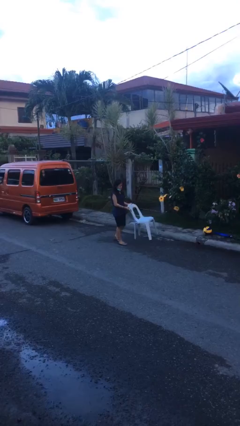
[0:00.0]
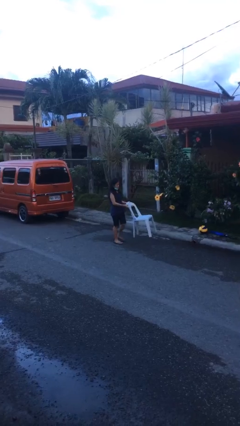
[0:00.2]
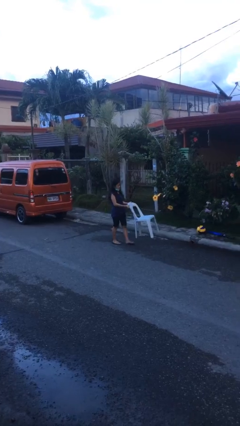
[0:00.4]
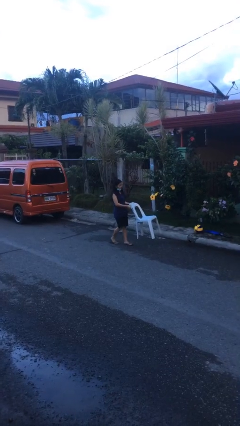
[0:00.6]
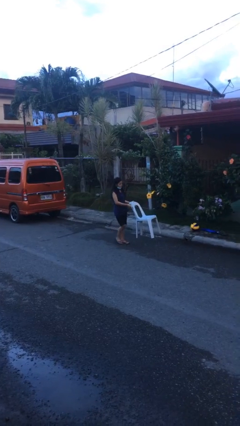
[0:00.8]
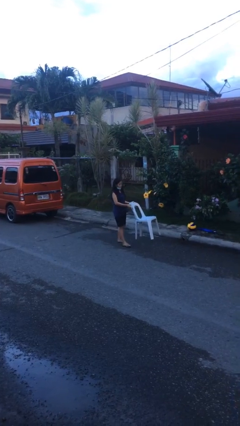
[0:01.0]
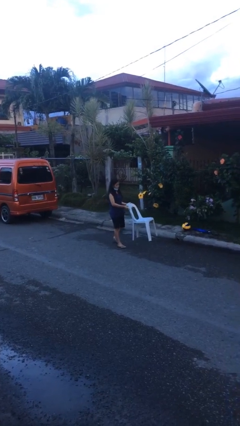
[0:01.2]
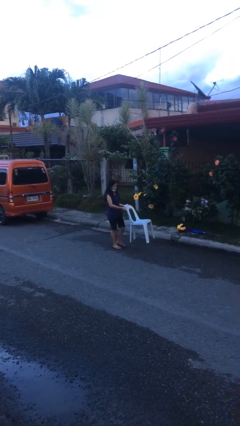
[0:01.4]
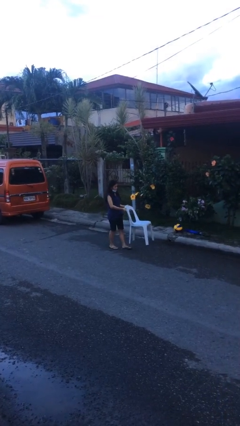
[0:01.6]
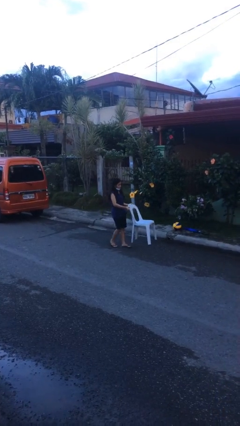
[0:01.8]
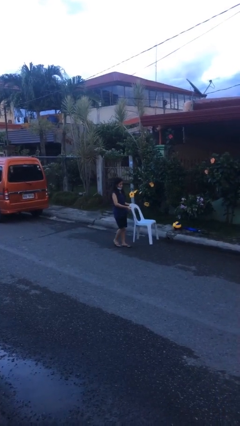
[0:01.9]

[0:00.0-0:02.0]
person carries heavy object

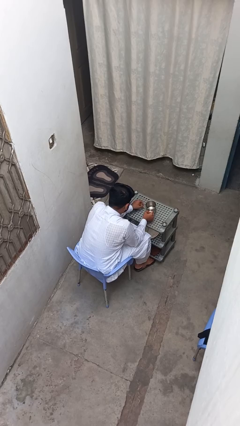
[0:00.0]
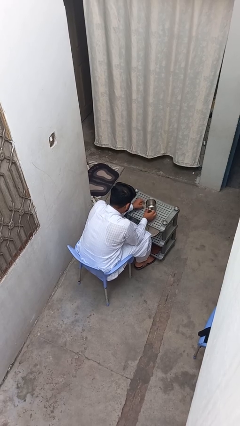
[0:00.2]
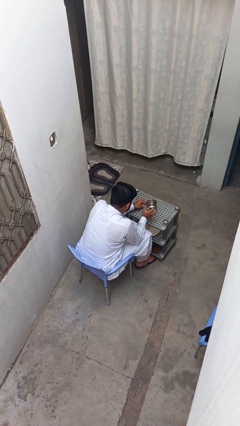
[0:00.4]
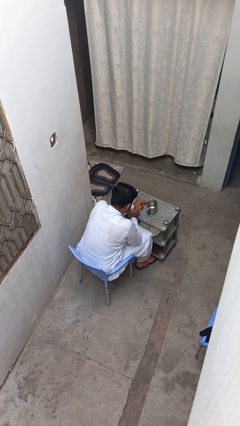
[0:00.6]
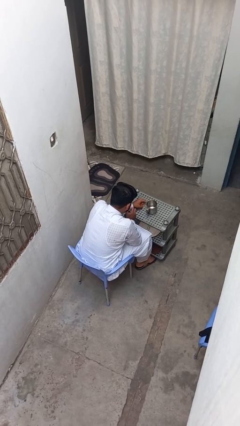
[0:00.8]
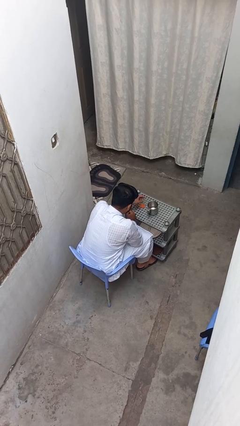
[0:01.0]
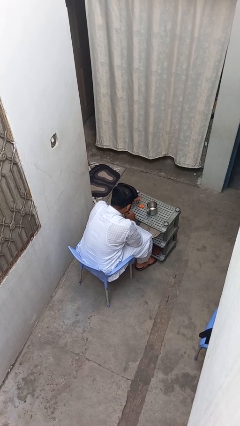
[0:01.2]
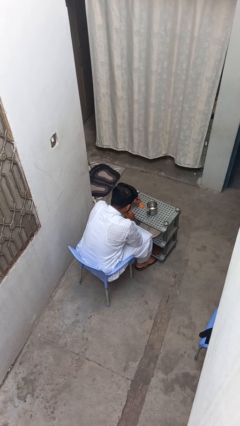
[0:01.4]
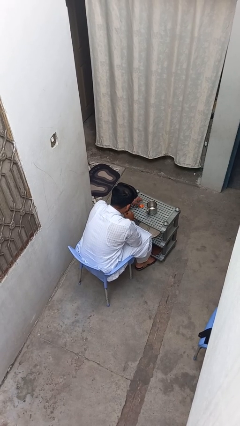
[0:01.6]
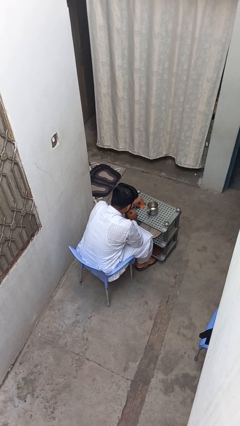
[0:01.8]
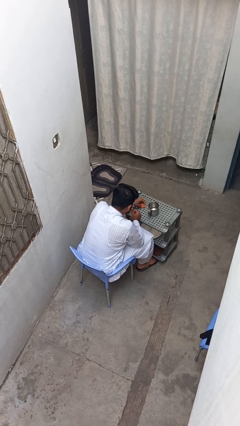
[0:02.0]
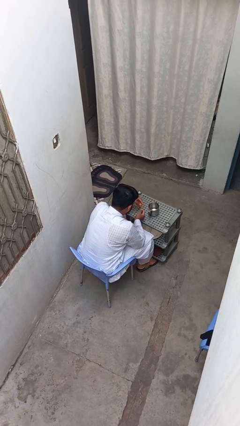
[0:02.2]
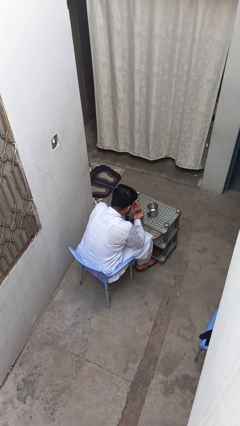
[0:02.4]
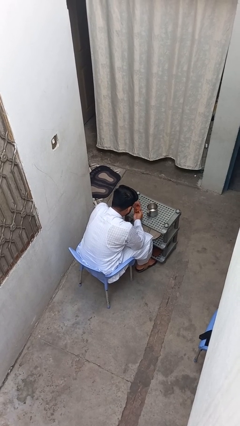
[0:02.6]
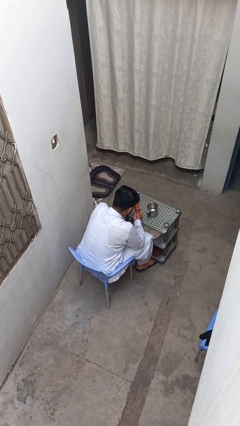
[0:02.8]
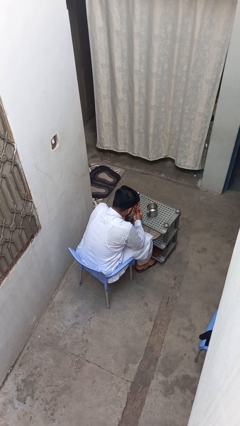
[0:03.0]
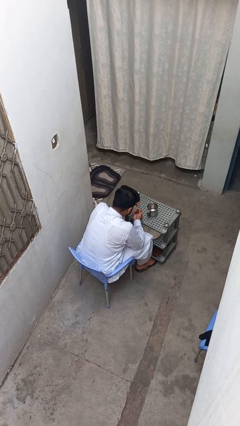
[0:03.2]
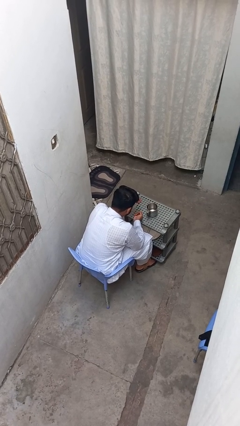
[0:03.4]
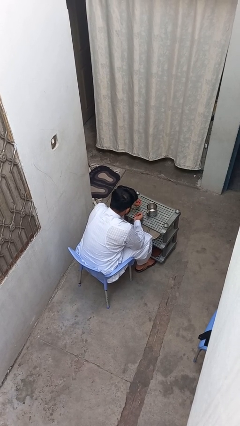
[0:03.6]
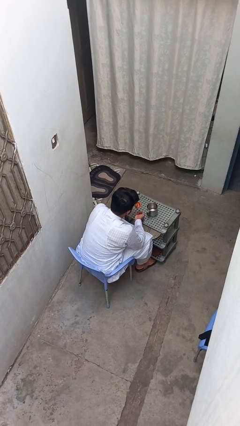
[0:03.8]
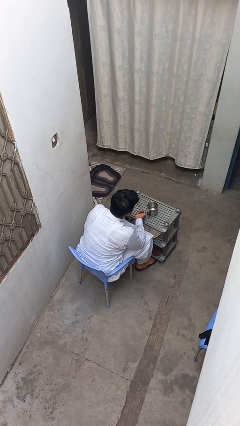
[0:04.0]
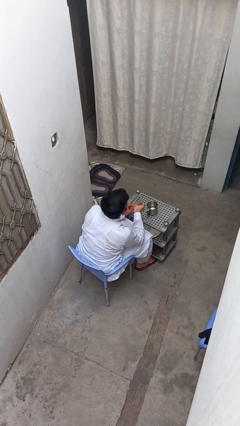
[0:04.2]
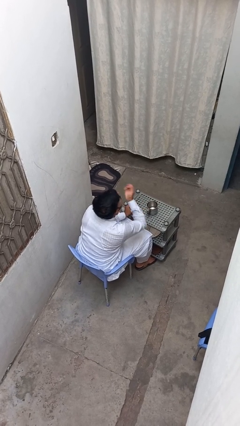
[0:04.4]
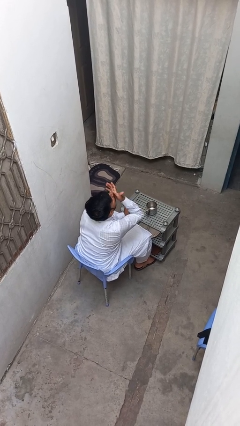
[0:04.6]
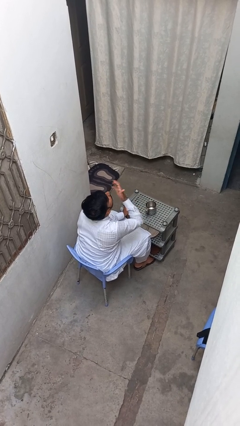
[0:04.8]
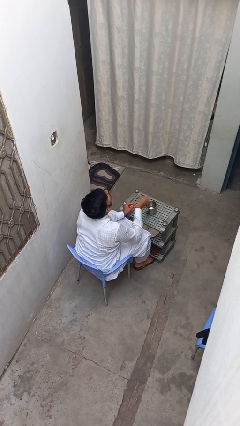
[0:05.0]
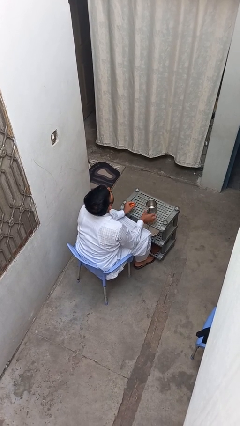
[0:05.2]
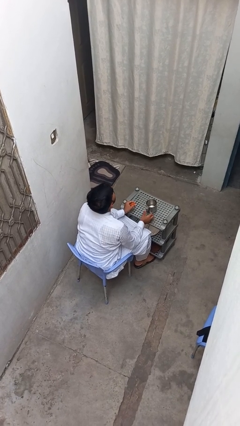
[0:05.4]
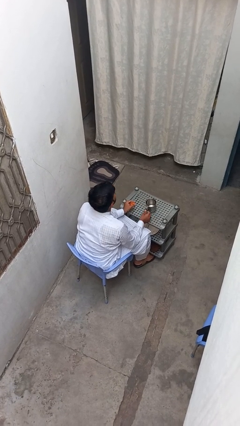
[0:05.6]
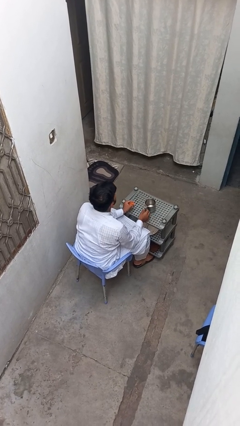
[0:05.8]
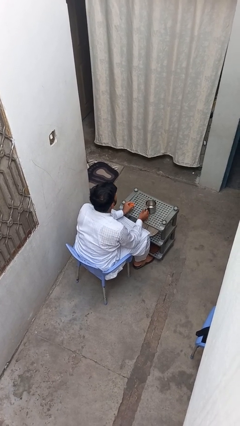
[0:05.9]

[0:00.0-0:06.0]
person takes medicine pills

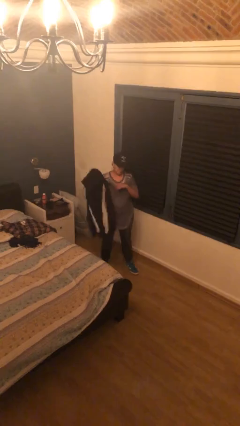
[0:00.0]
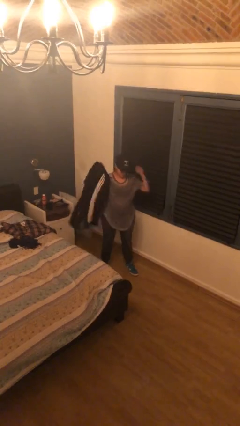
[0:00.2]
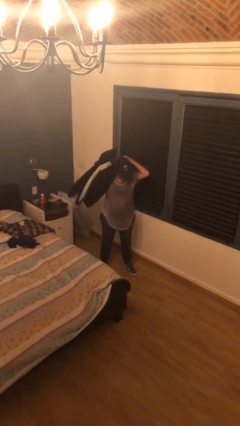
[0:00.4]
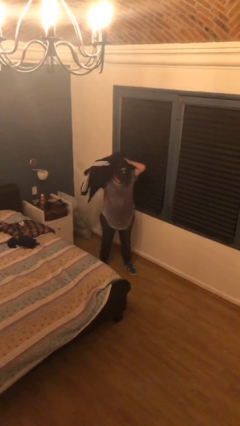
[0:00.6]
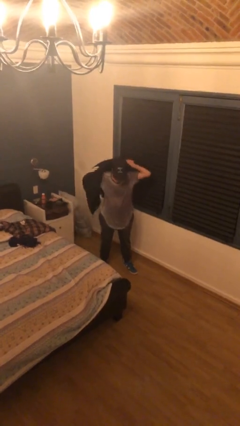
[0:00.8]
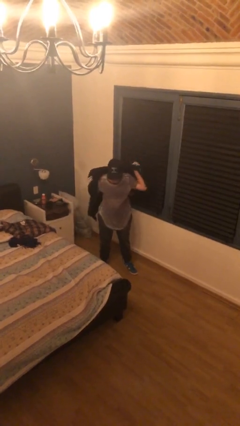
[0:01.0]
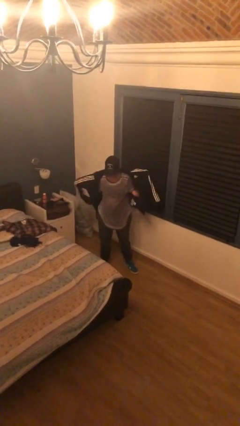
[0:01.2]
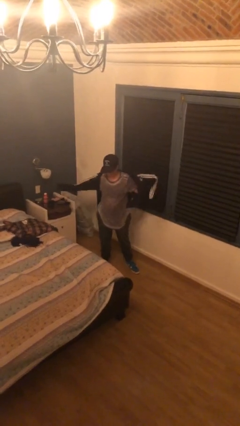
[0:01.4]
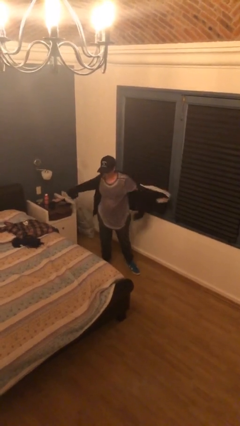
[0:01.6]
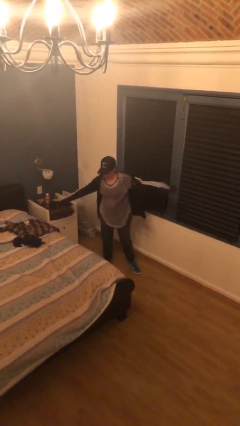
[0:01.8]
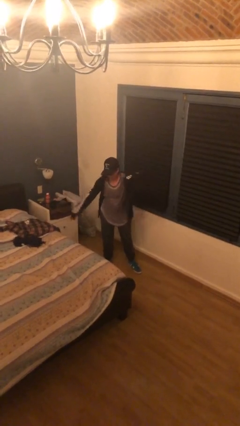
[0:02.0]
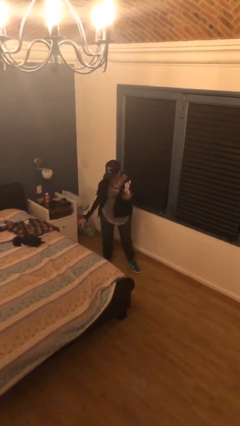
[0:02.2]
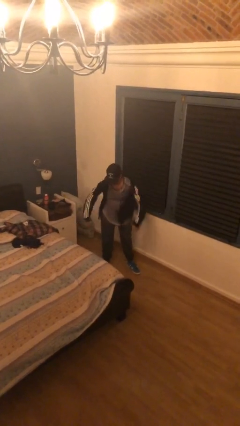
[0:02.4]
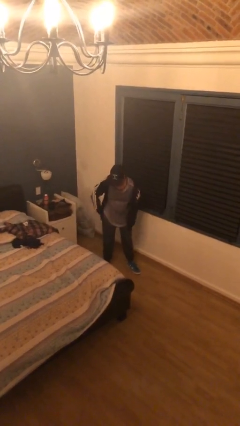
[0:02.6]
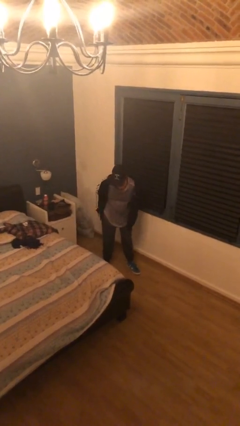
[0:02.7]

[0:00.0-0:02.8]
person puts on jacket

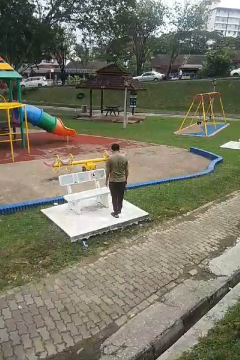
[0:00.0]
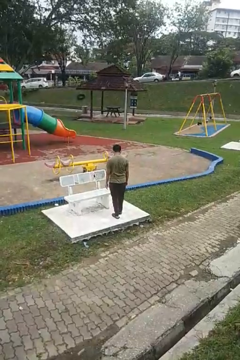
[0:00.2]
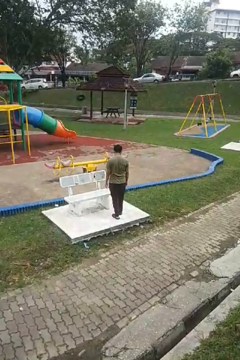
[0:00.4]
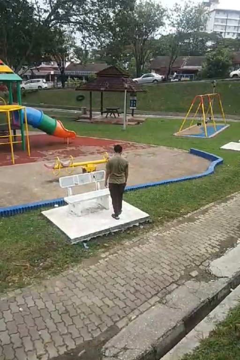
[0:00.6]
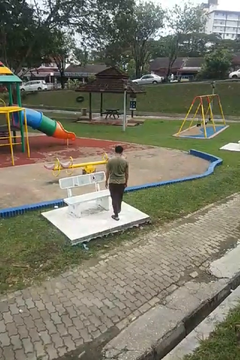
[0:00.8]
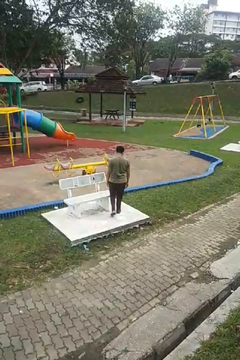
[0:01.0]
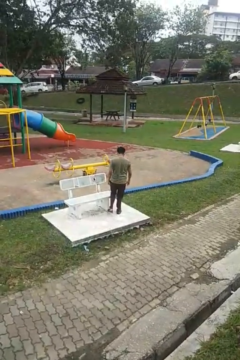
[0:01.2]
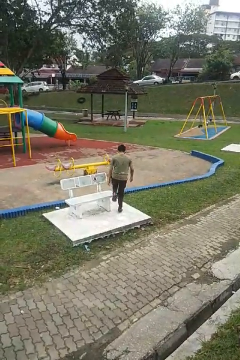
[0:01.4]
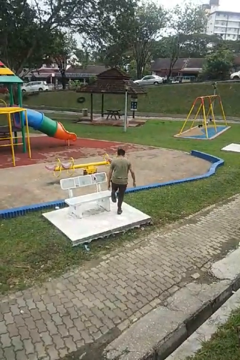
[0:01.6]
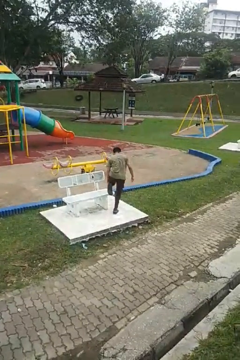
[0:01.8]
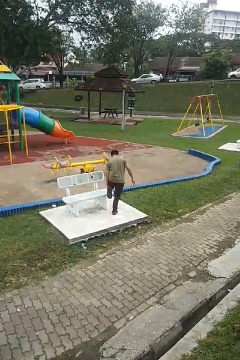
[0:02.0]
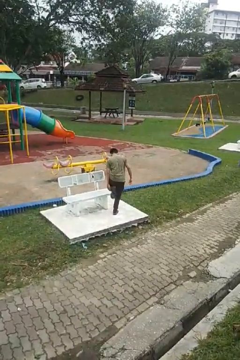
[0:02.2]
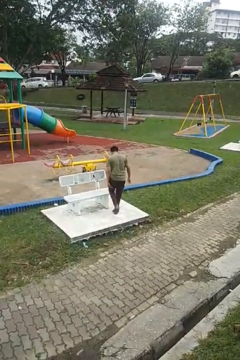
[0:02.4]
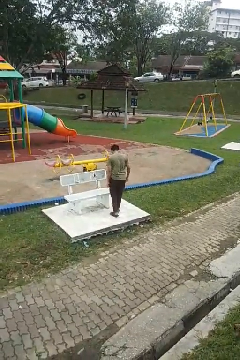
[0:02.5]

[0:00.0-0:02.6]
person stubs toe

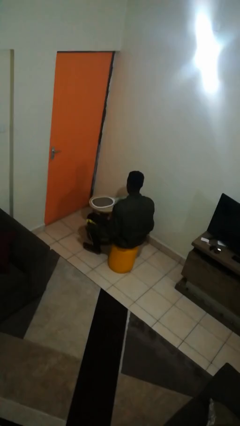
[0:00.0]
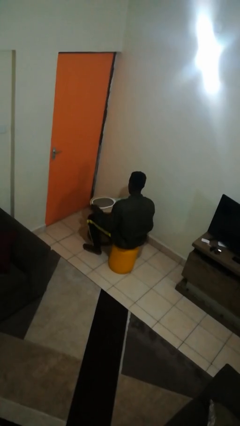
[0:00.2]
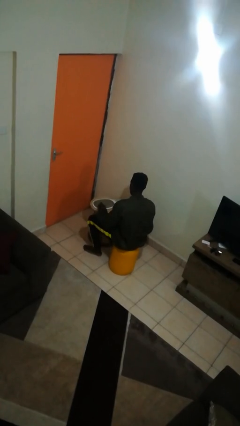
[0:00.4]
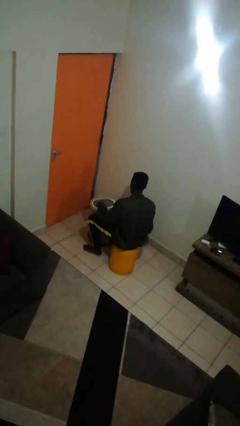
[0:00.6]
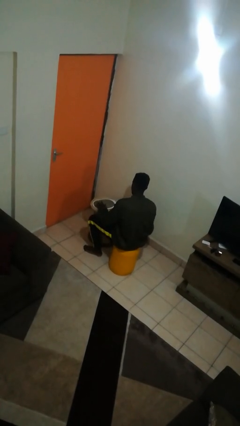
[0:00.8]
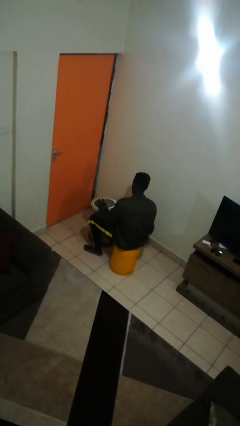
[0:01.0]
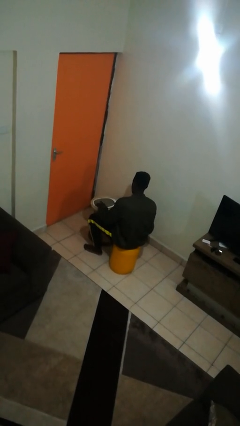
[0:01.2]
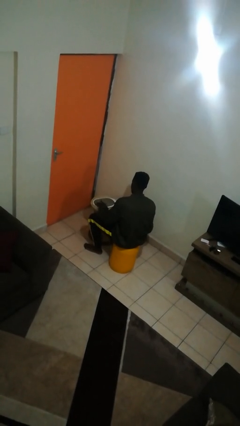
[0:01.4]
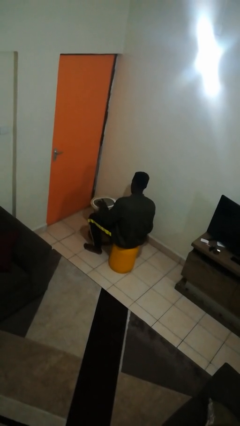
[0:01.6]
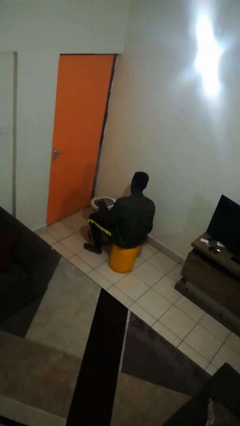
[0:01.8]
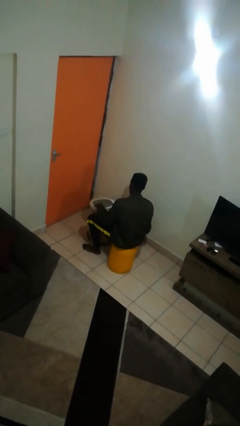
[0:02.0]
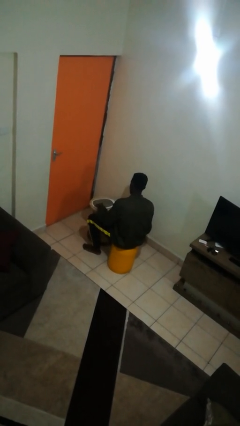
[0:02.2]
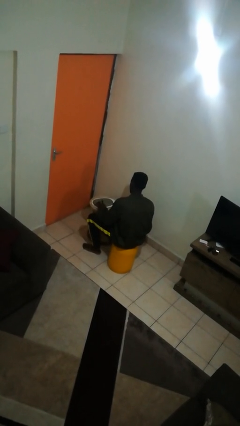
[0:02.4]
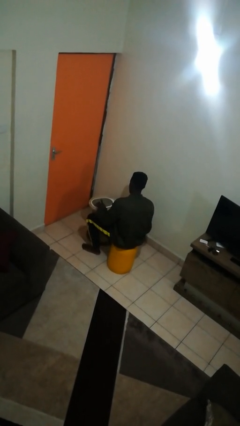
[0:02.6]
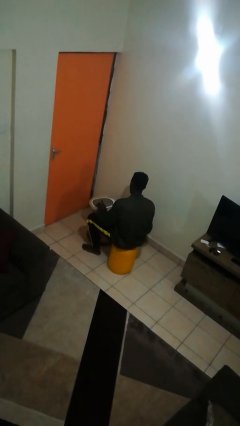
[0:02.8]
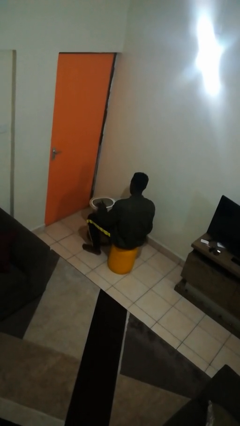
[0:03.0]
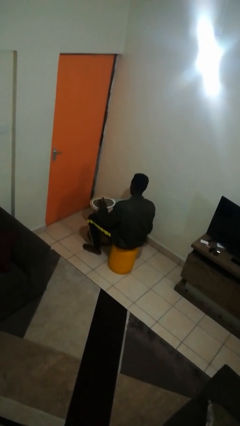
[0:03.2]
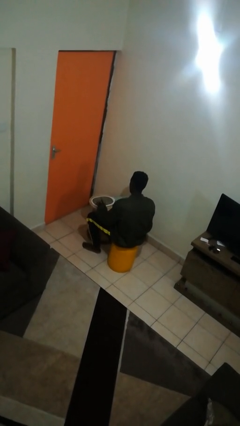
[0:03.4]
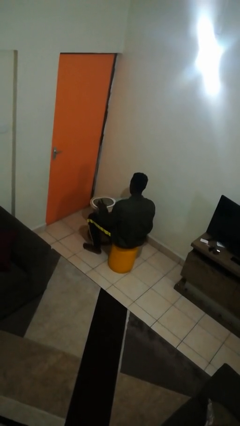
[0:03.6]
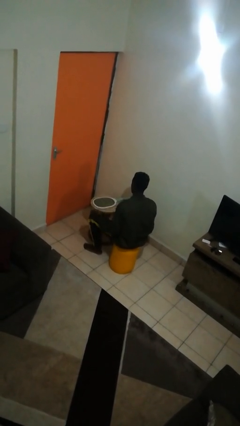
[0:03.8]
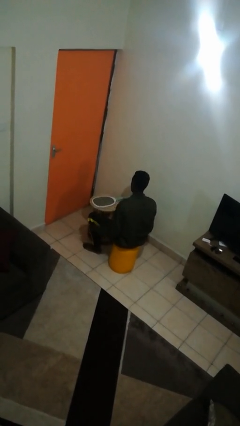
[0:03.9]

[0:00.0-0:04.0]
person taps object with finger
